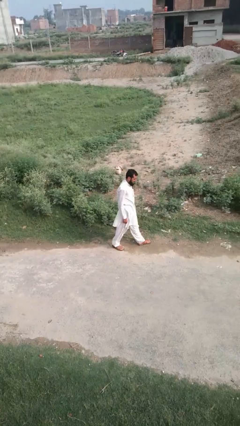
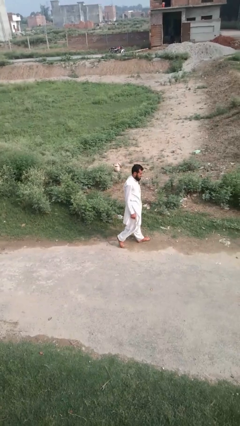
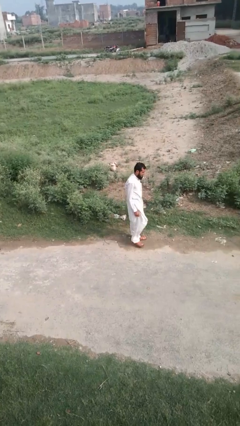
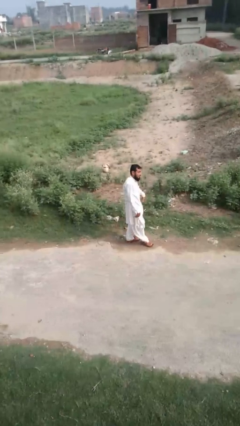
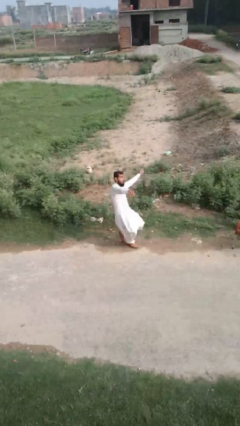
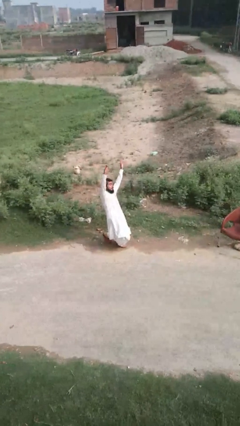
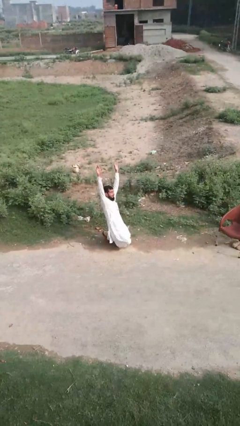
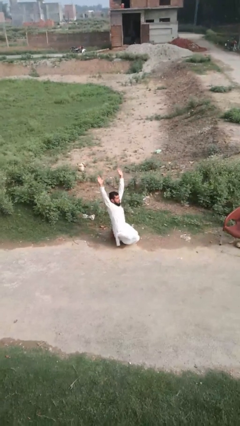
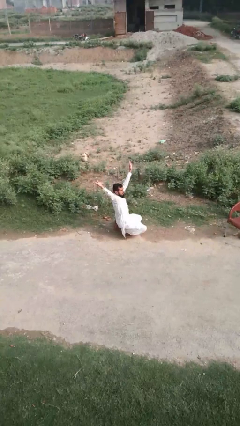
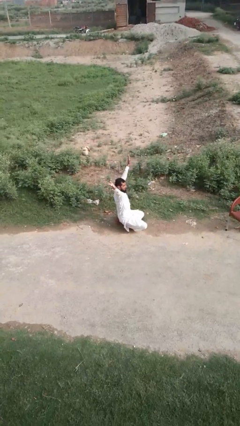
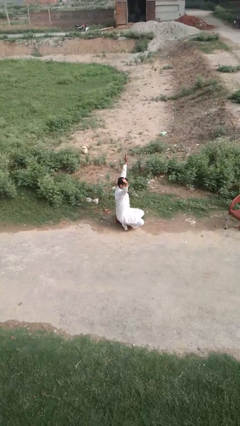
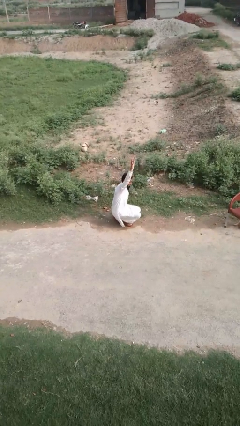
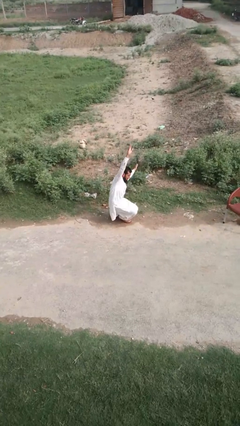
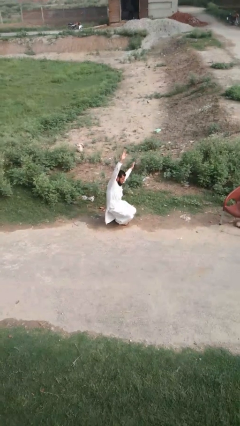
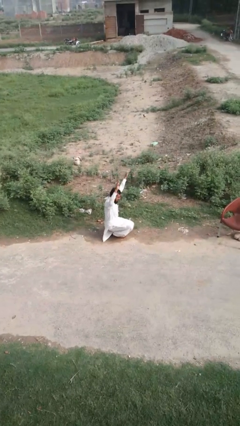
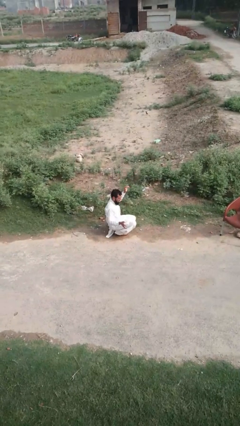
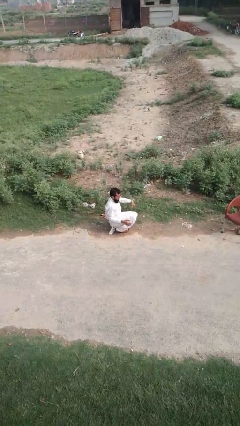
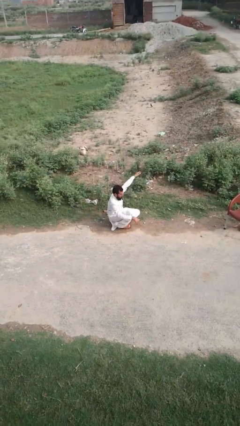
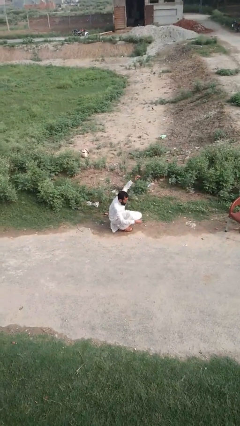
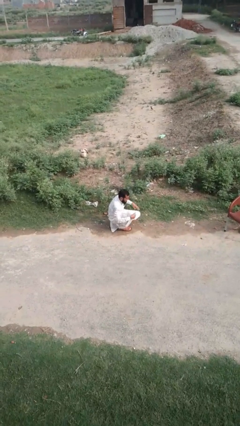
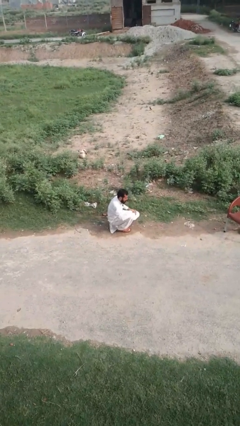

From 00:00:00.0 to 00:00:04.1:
person trips on object on floor

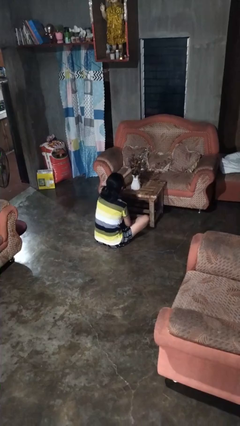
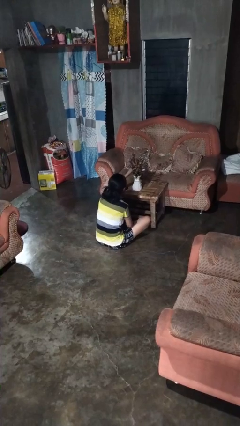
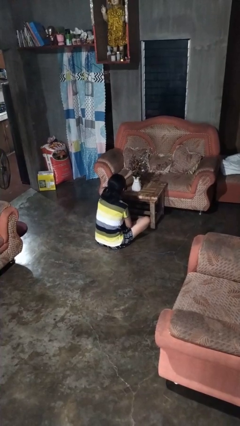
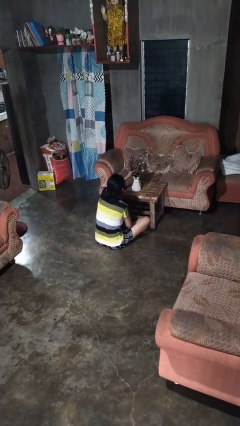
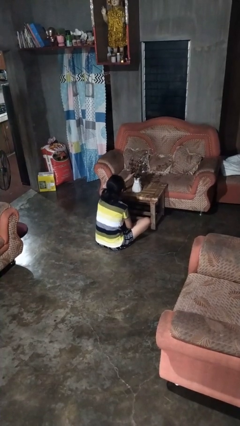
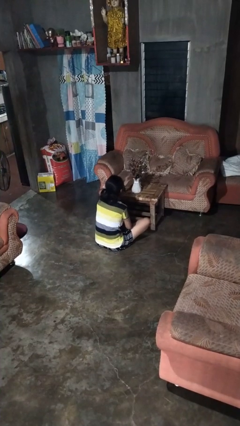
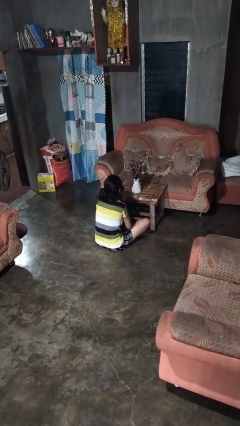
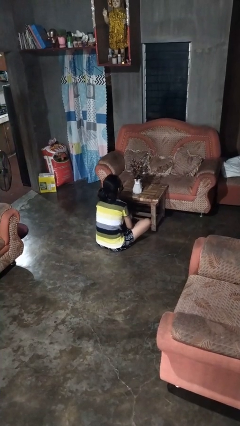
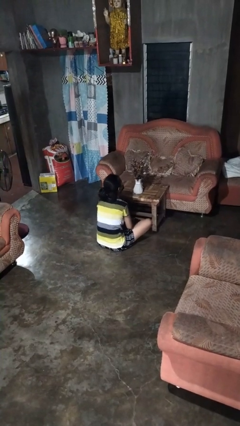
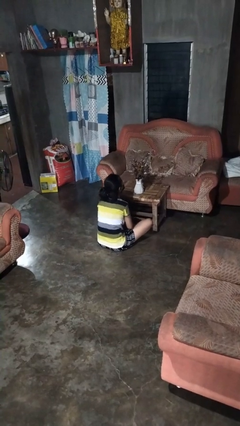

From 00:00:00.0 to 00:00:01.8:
person arranges flowers in vase

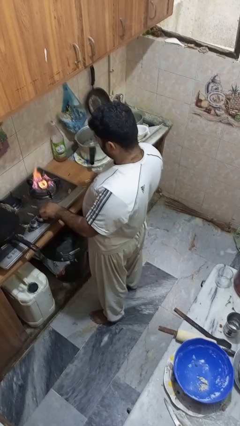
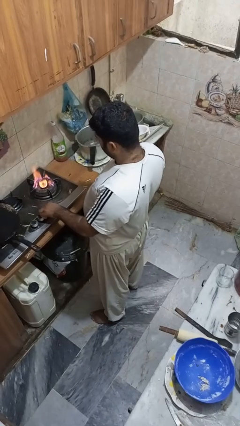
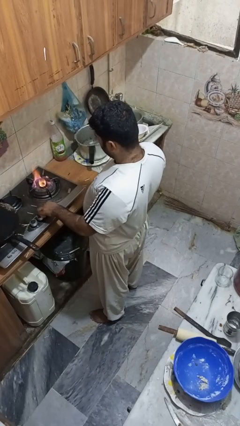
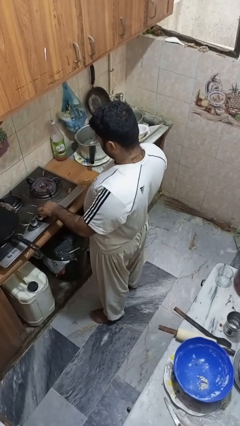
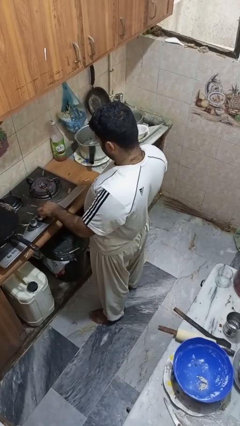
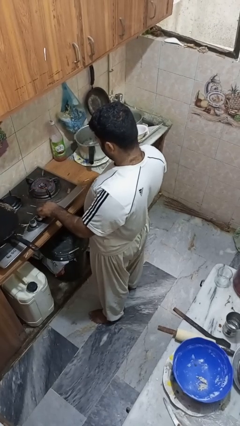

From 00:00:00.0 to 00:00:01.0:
person turns off stovetop

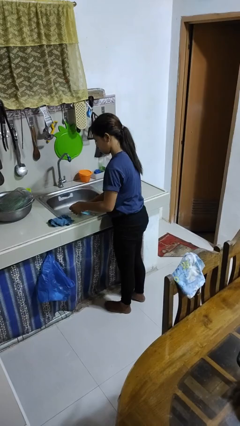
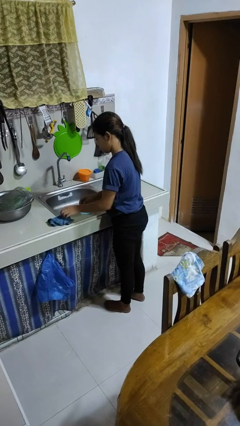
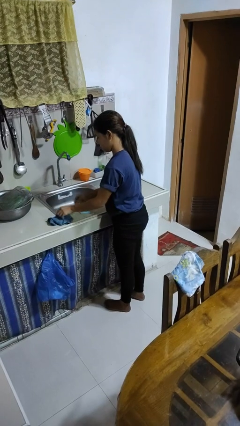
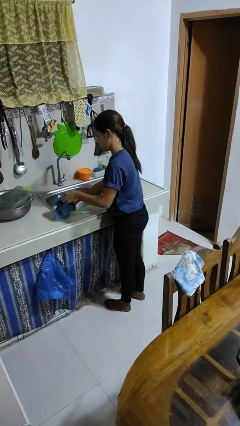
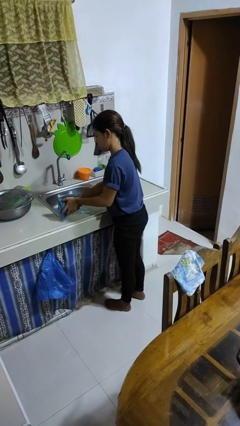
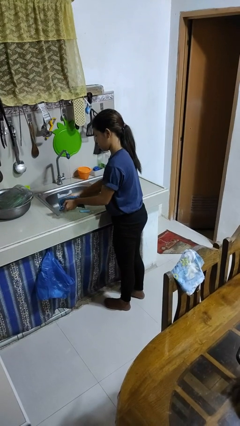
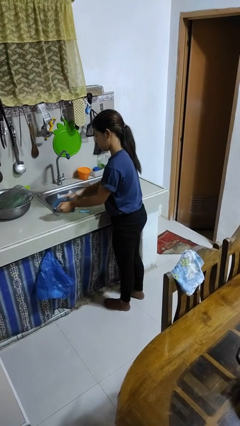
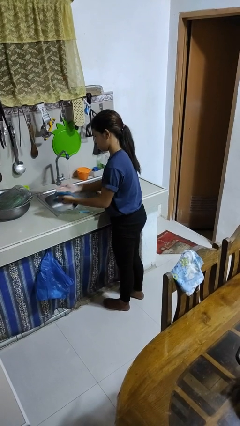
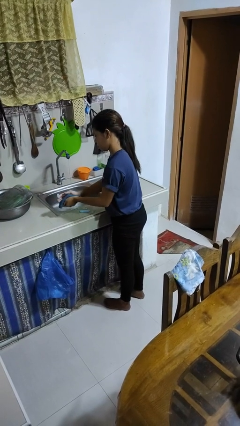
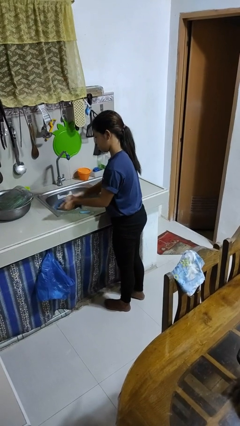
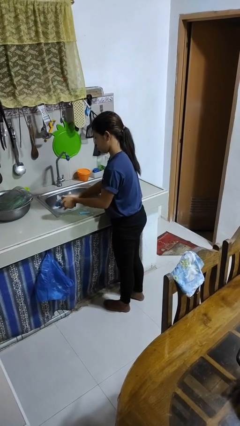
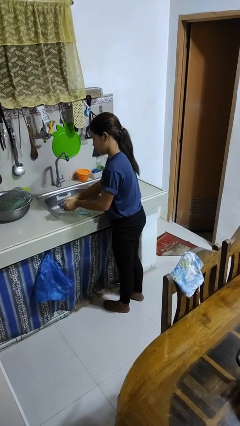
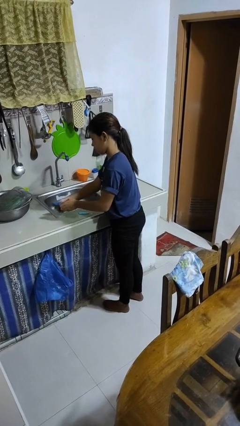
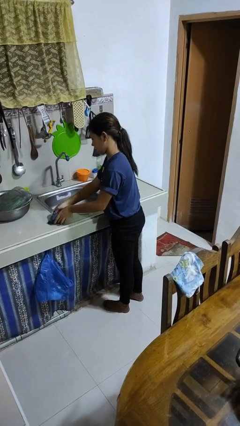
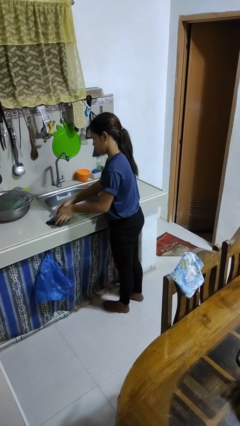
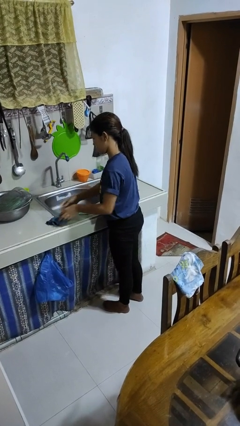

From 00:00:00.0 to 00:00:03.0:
person dries hands with towel

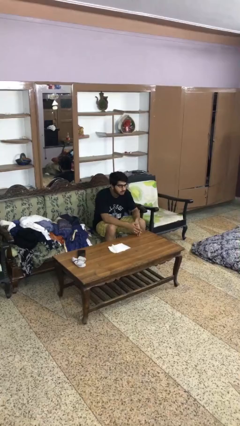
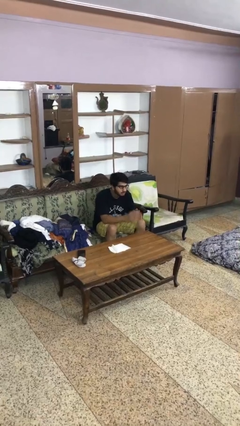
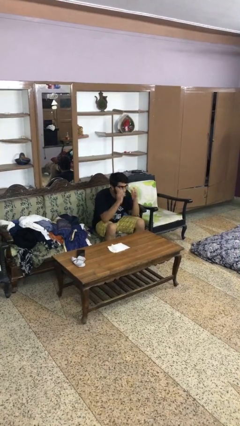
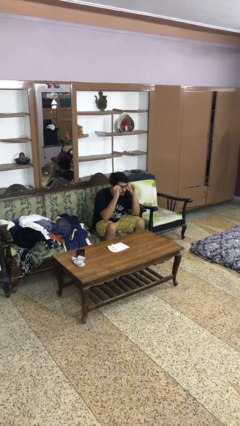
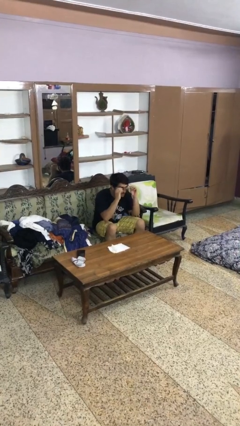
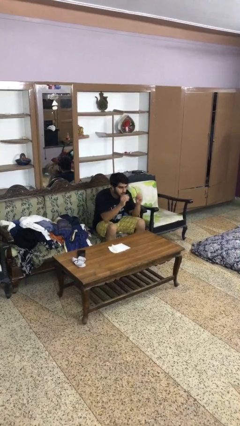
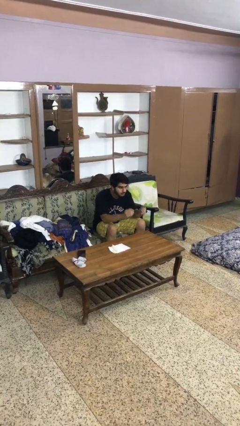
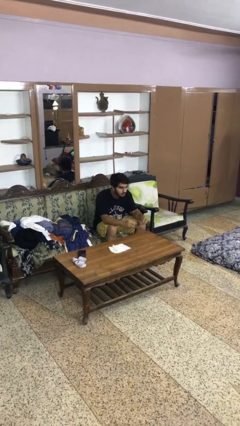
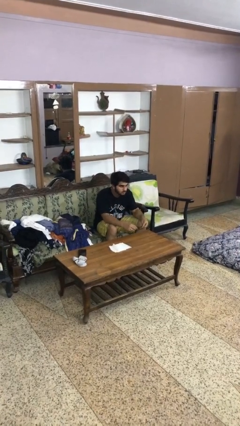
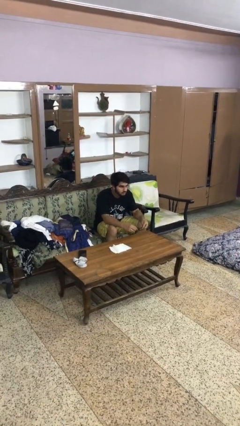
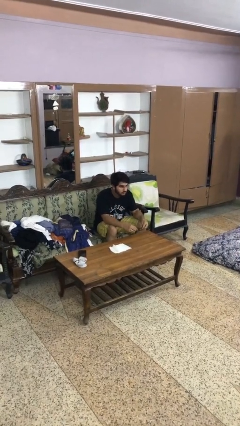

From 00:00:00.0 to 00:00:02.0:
person takes off glasses

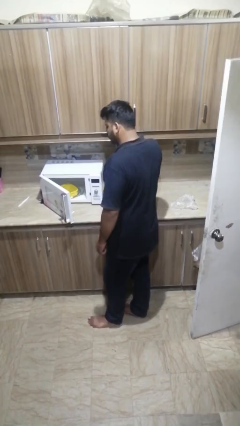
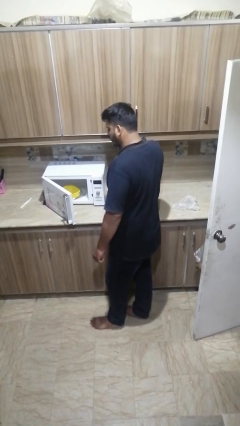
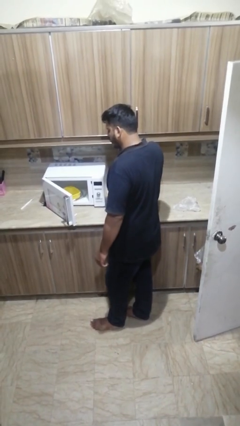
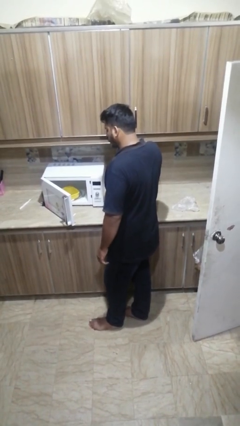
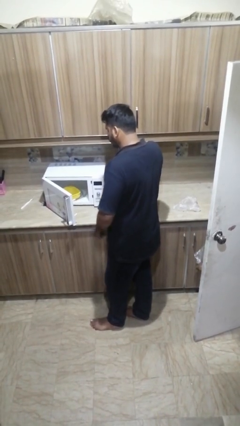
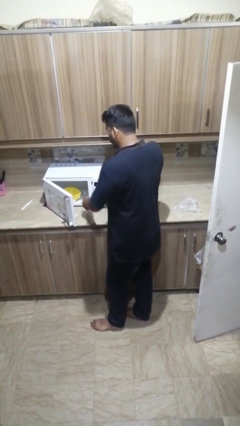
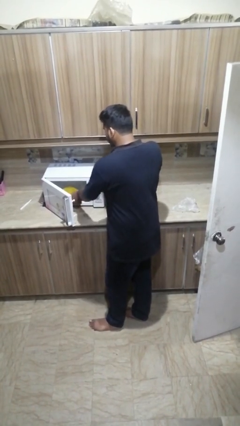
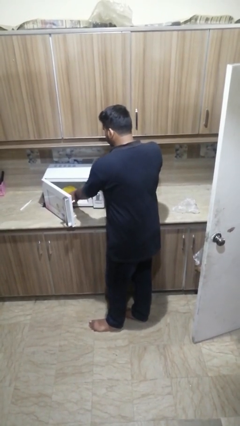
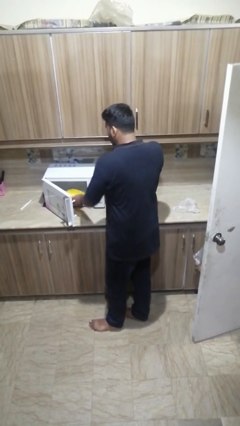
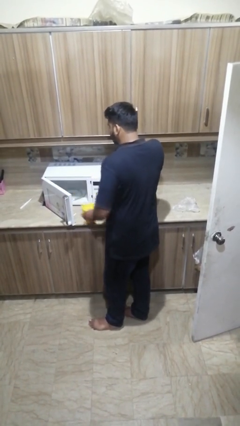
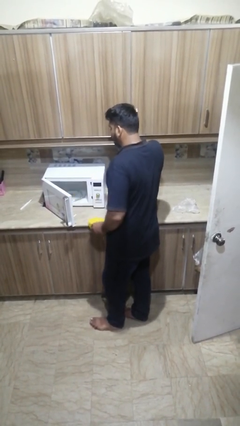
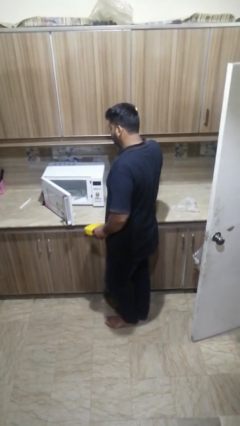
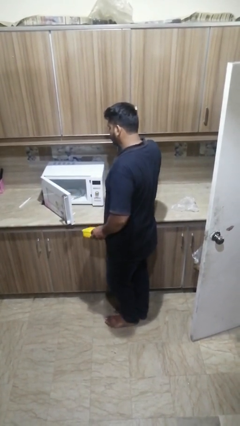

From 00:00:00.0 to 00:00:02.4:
person takes object from microwave

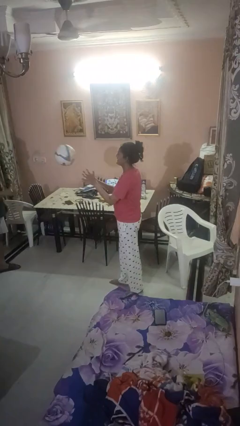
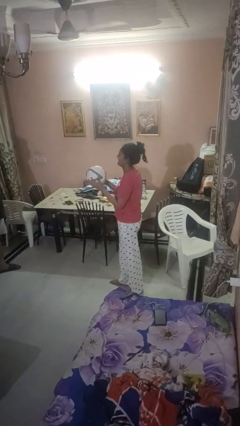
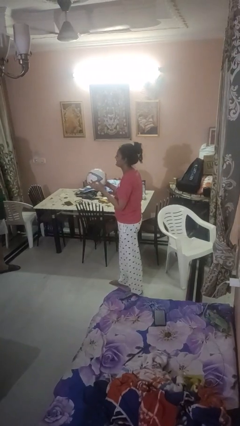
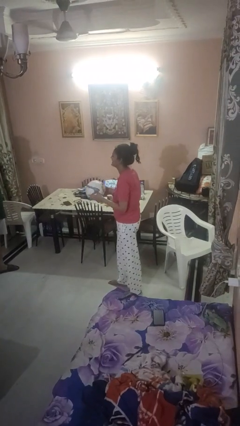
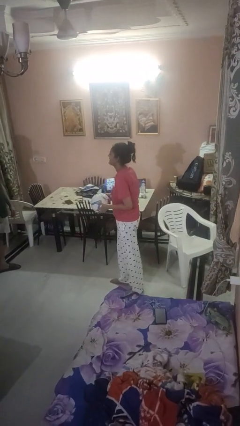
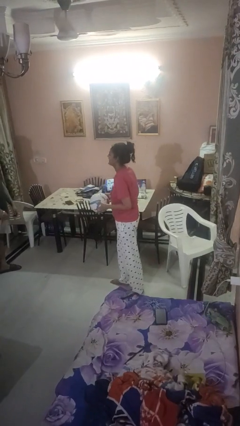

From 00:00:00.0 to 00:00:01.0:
person throws object to person

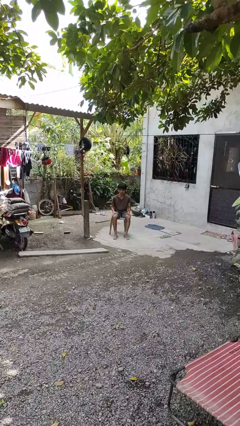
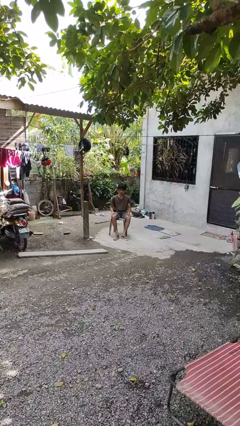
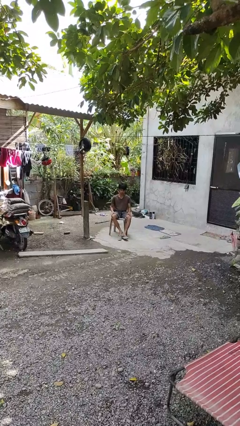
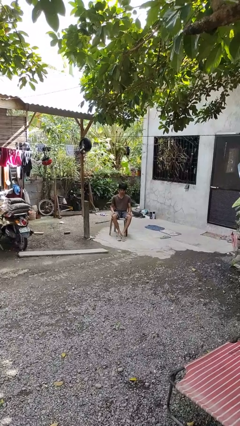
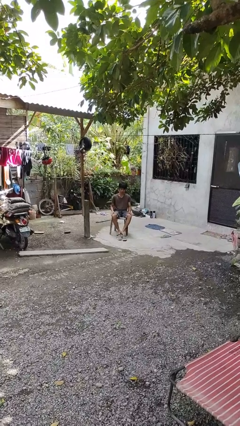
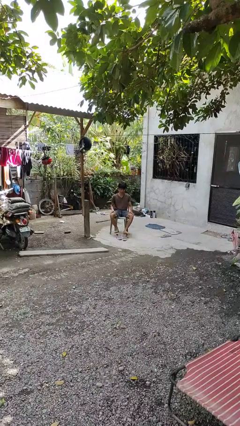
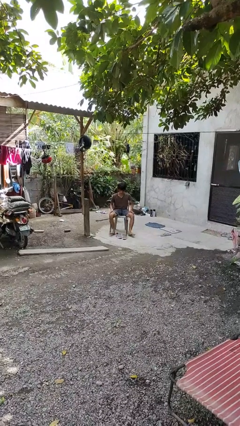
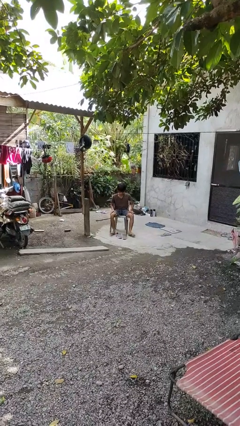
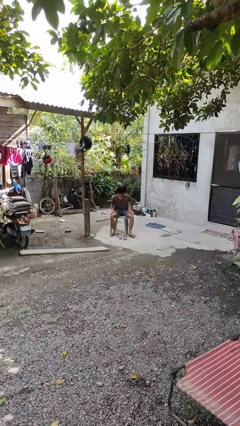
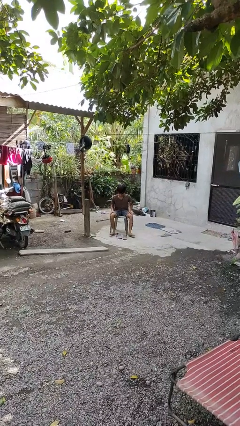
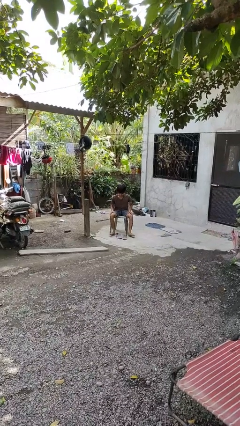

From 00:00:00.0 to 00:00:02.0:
person takes off shoes
